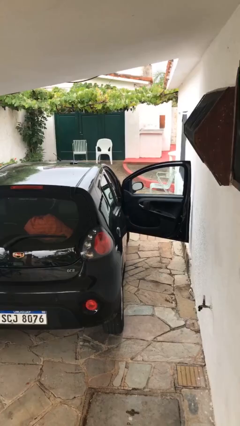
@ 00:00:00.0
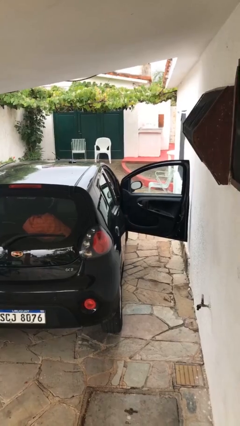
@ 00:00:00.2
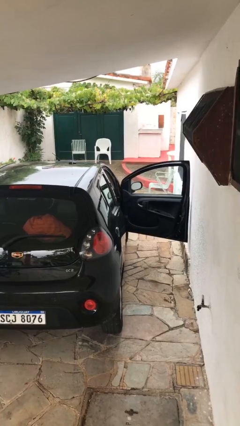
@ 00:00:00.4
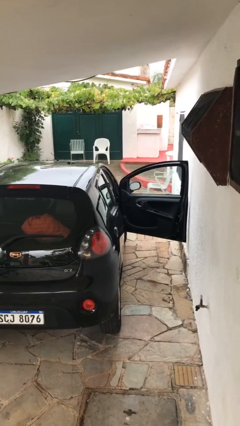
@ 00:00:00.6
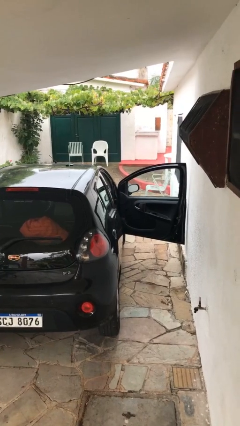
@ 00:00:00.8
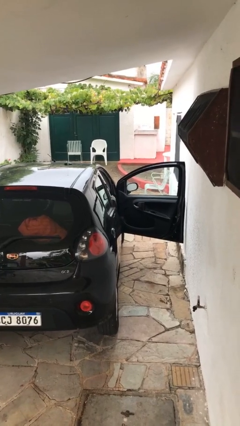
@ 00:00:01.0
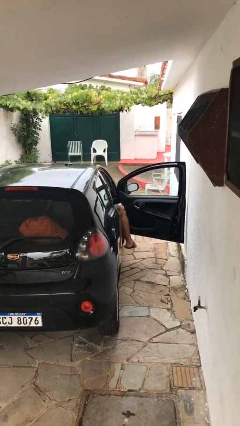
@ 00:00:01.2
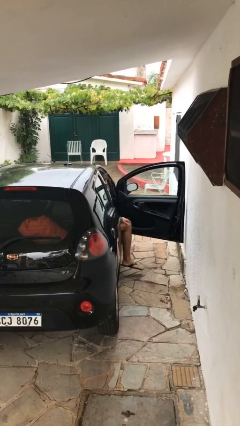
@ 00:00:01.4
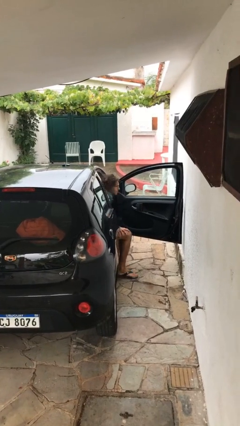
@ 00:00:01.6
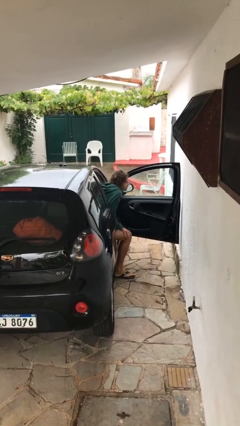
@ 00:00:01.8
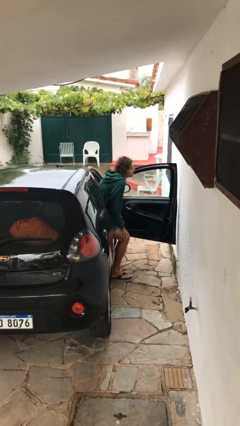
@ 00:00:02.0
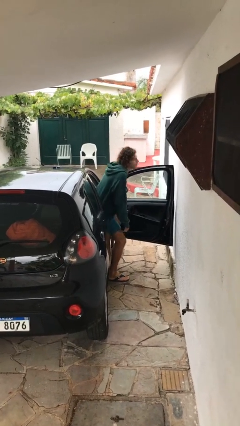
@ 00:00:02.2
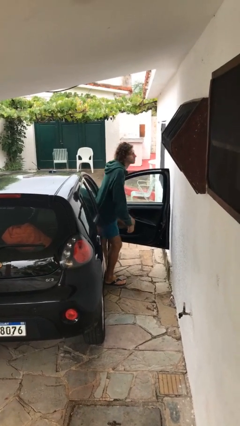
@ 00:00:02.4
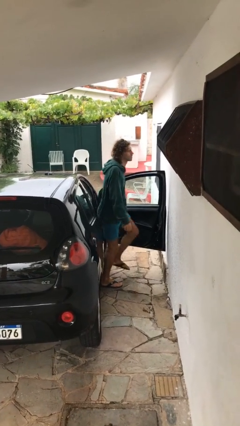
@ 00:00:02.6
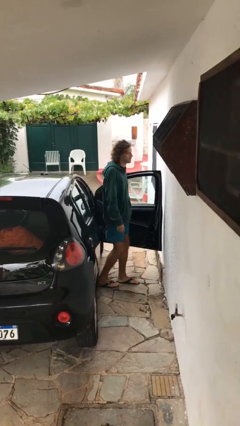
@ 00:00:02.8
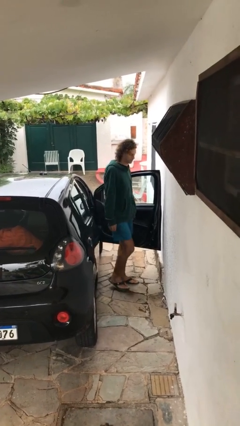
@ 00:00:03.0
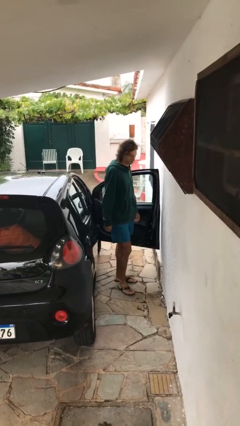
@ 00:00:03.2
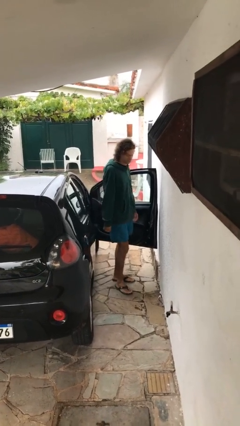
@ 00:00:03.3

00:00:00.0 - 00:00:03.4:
person exits car

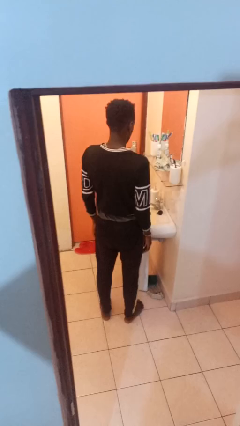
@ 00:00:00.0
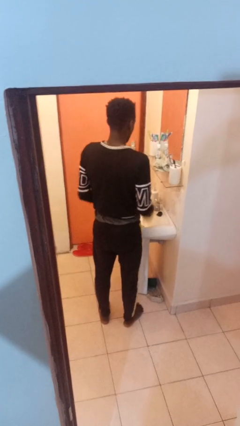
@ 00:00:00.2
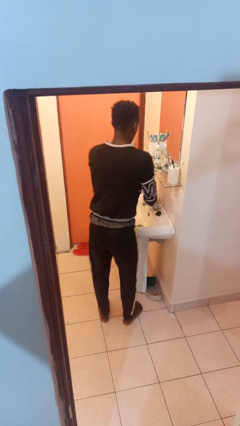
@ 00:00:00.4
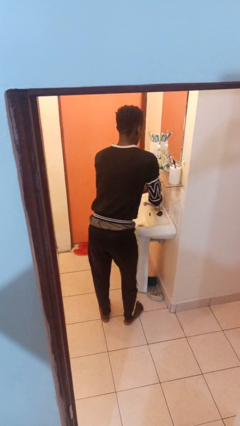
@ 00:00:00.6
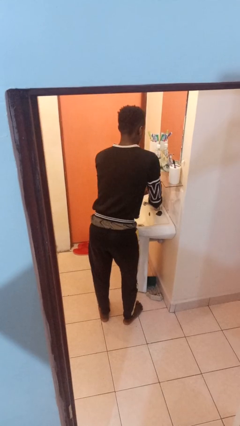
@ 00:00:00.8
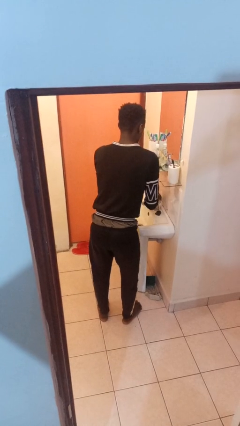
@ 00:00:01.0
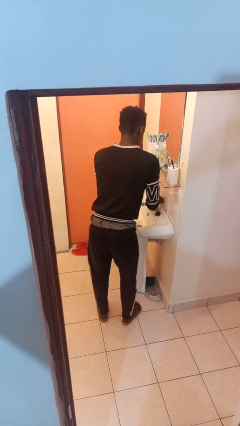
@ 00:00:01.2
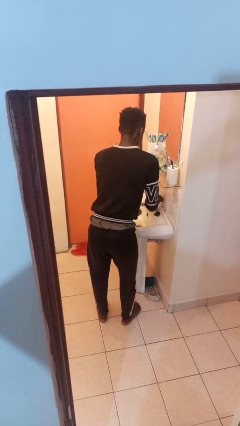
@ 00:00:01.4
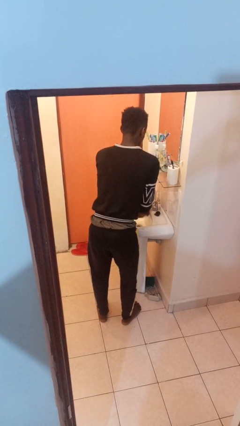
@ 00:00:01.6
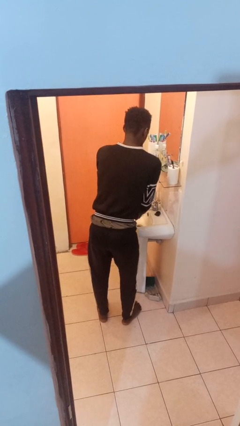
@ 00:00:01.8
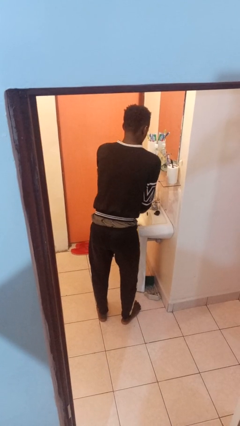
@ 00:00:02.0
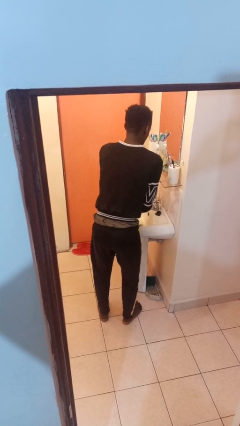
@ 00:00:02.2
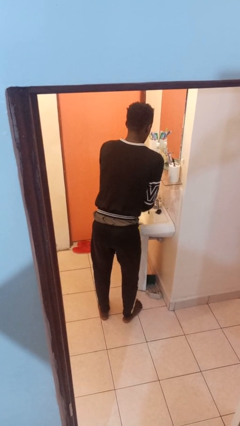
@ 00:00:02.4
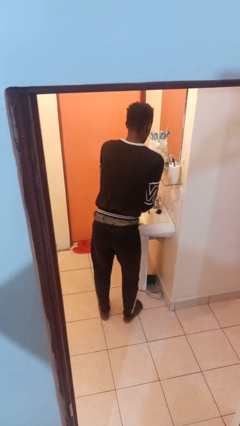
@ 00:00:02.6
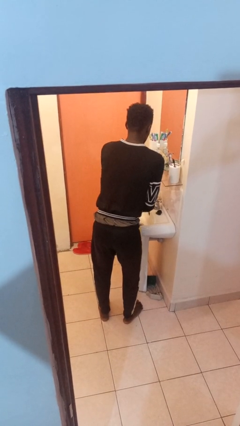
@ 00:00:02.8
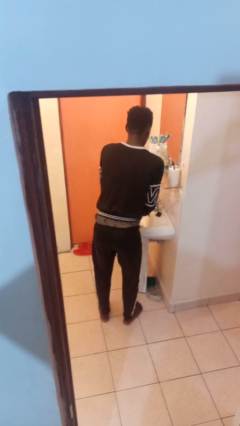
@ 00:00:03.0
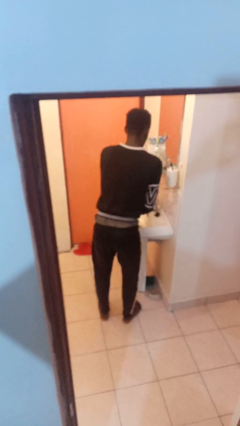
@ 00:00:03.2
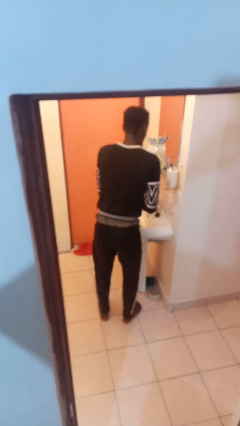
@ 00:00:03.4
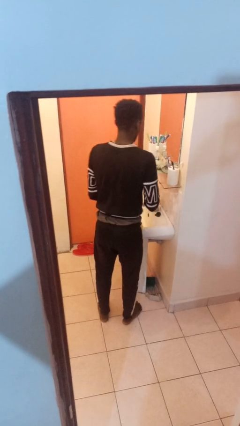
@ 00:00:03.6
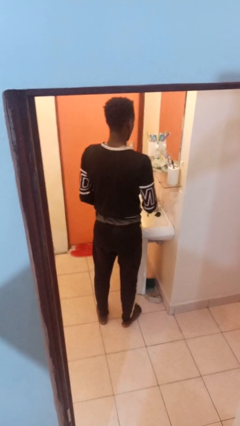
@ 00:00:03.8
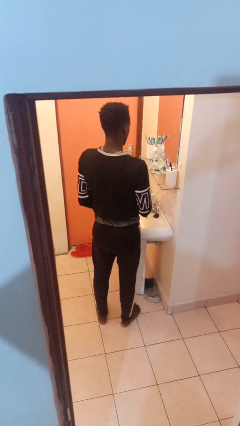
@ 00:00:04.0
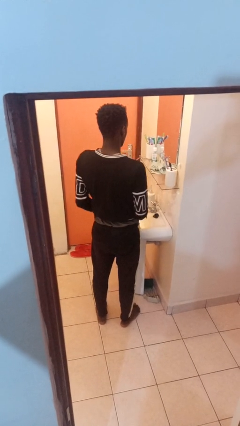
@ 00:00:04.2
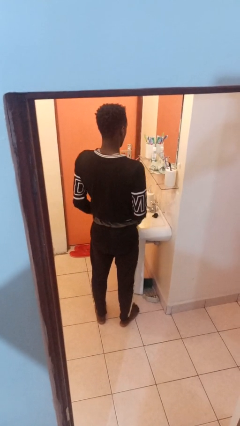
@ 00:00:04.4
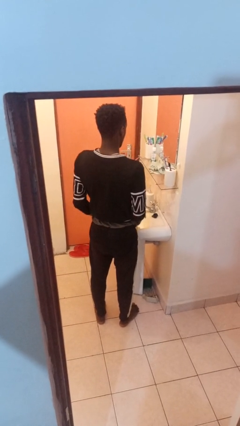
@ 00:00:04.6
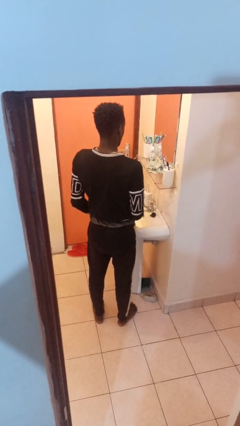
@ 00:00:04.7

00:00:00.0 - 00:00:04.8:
person washes hands

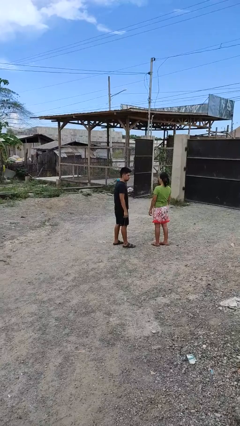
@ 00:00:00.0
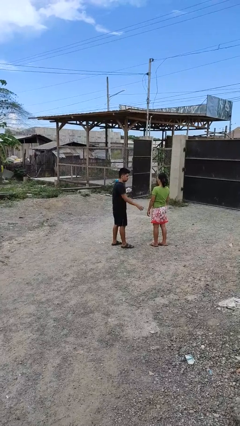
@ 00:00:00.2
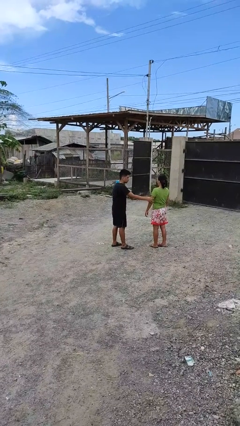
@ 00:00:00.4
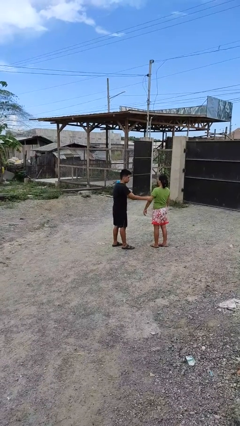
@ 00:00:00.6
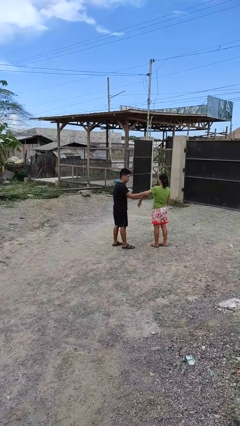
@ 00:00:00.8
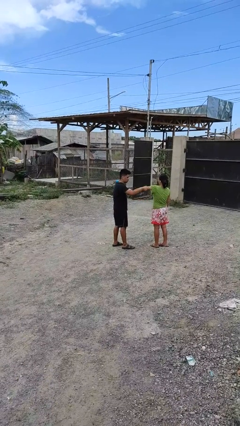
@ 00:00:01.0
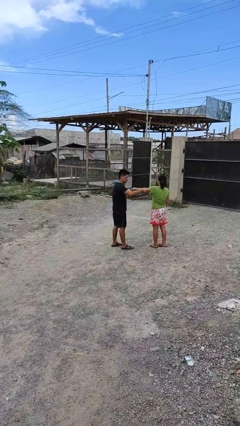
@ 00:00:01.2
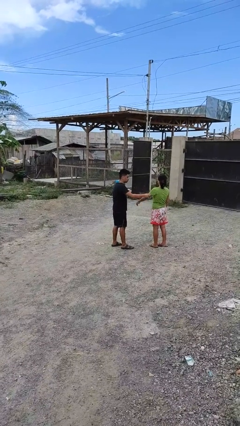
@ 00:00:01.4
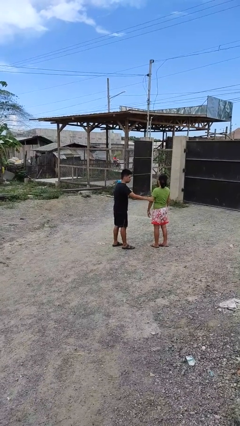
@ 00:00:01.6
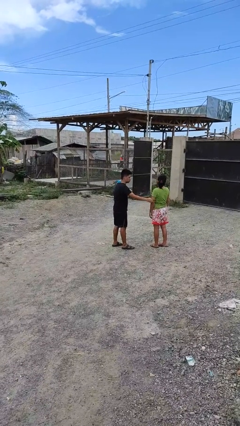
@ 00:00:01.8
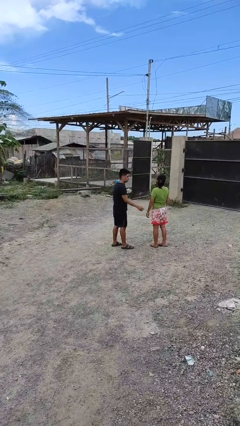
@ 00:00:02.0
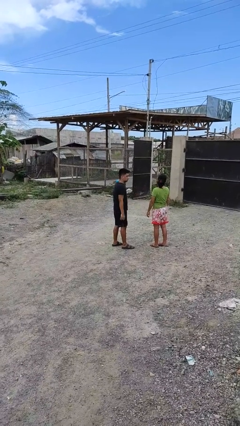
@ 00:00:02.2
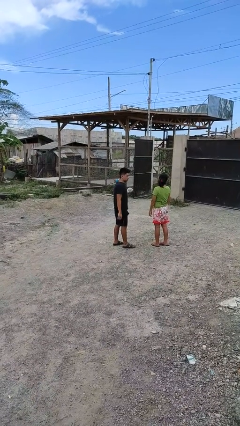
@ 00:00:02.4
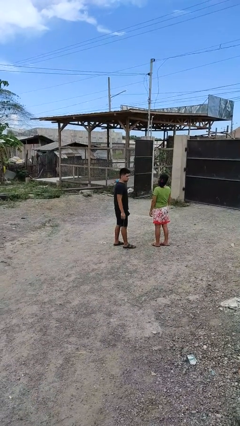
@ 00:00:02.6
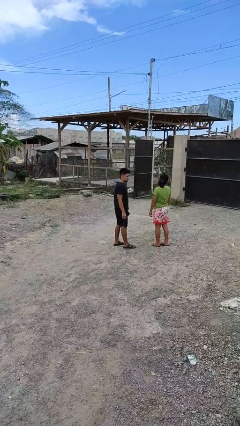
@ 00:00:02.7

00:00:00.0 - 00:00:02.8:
person grabs person by bicep

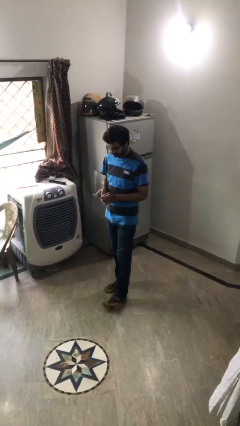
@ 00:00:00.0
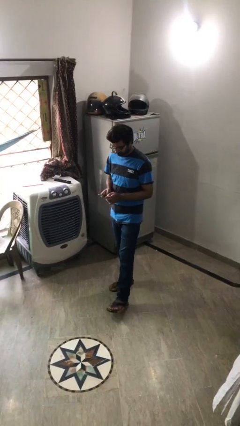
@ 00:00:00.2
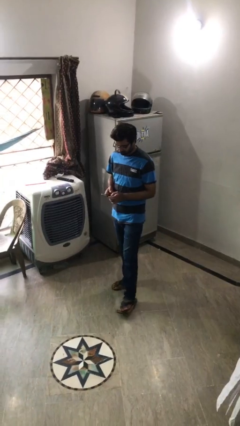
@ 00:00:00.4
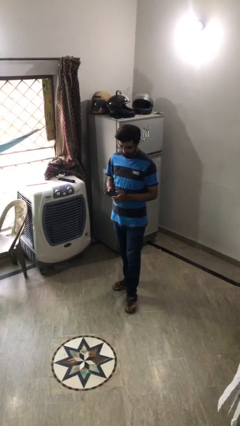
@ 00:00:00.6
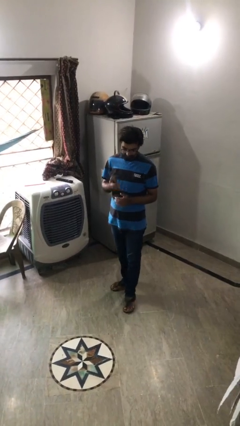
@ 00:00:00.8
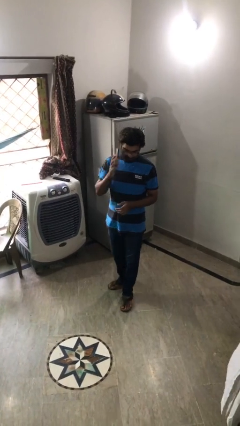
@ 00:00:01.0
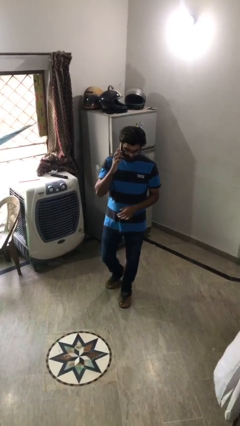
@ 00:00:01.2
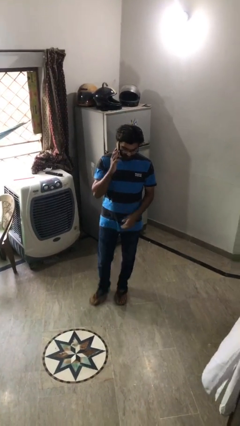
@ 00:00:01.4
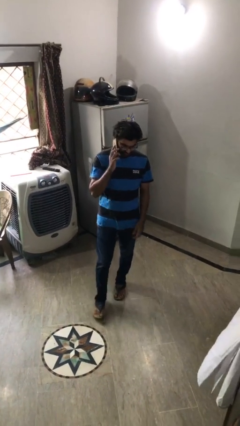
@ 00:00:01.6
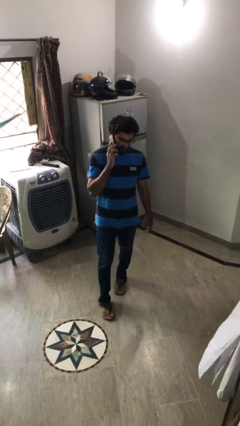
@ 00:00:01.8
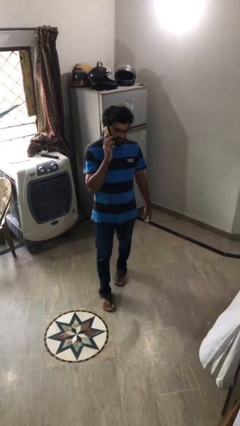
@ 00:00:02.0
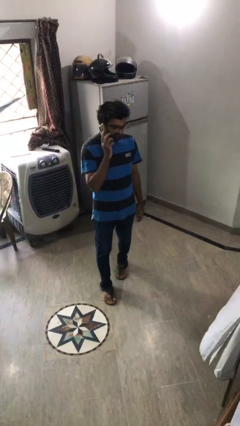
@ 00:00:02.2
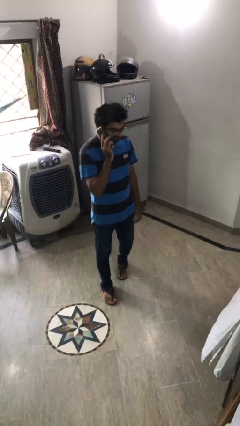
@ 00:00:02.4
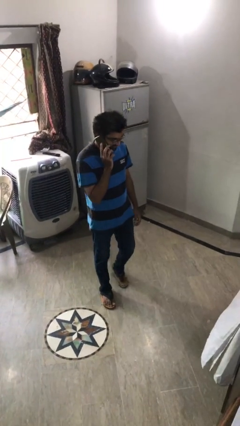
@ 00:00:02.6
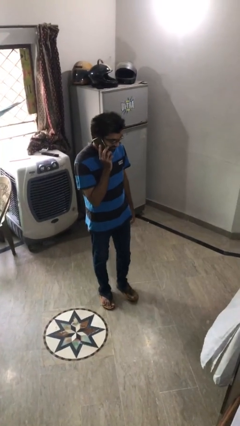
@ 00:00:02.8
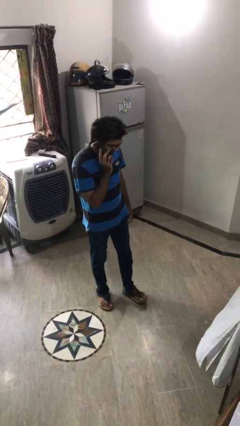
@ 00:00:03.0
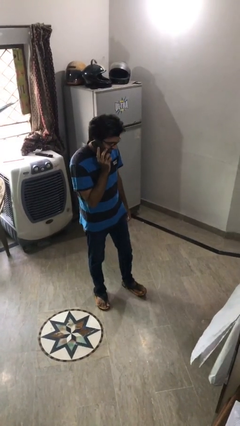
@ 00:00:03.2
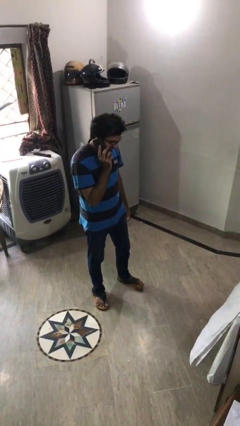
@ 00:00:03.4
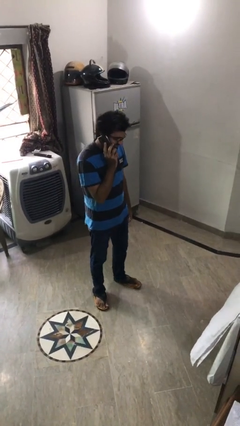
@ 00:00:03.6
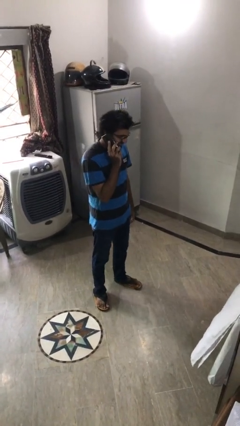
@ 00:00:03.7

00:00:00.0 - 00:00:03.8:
person talks on phone

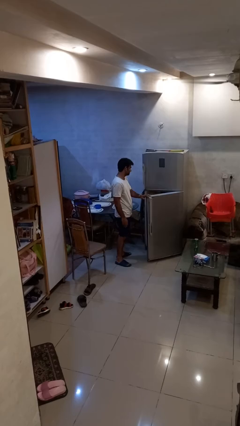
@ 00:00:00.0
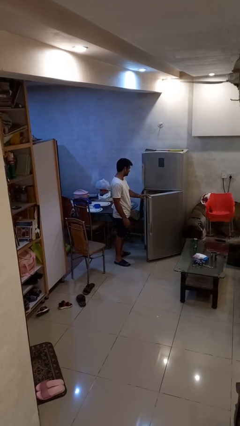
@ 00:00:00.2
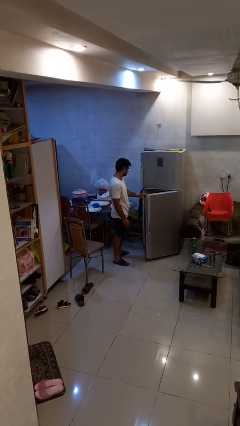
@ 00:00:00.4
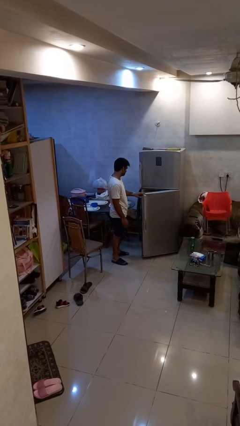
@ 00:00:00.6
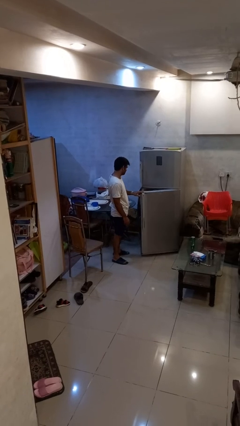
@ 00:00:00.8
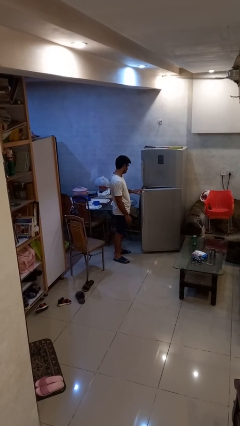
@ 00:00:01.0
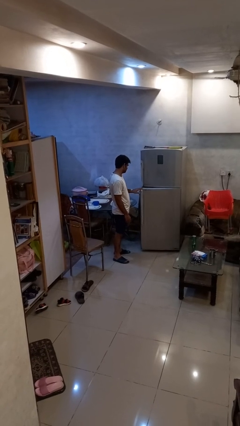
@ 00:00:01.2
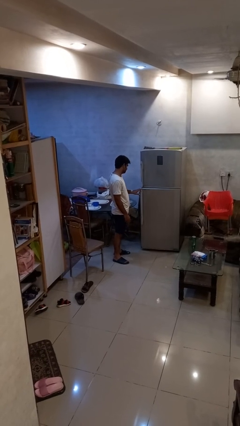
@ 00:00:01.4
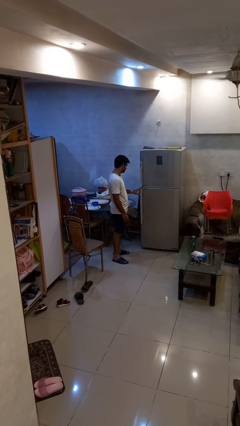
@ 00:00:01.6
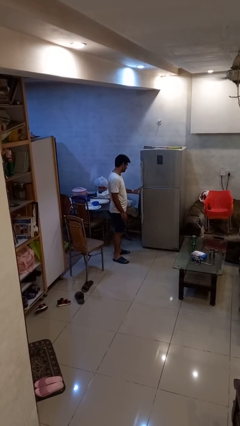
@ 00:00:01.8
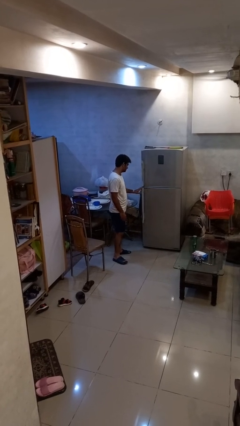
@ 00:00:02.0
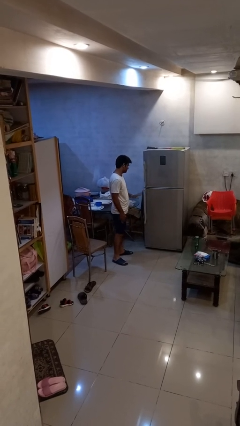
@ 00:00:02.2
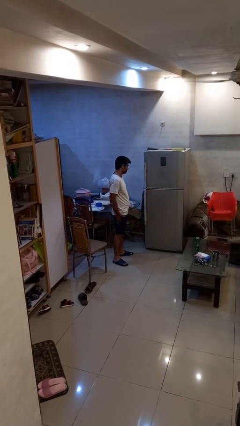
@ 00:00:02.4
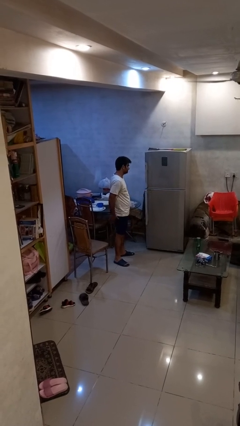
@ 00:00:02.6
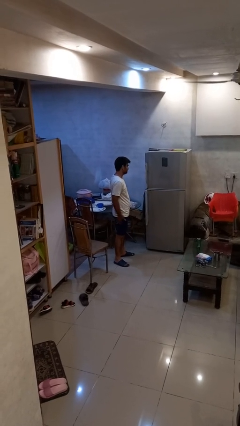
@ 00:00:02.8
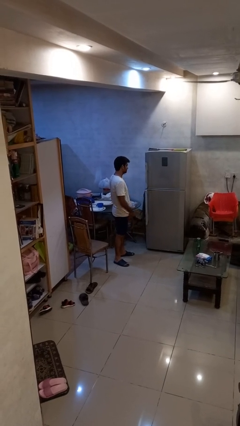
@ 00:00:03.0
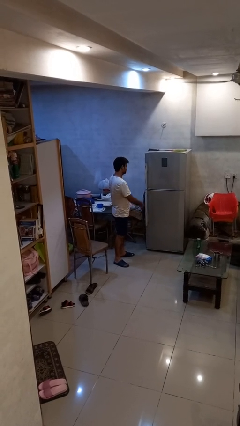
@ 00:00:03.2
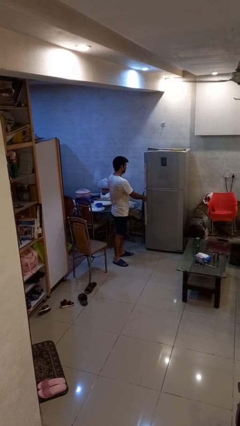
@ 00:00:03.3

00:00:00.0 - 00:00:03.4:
person closes refrigerator
